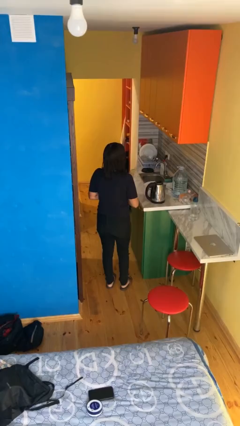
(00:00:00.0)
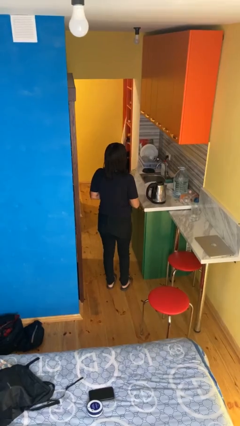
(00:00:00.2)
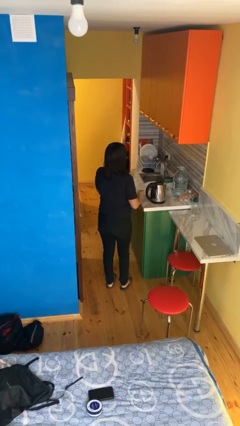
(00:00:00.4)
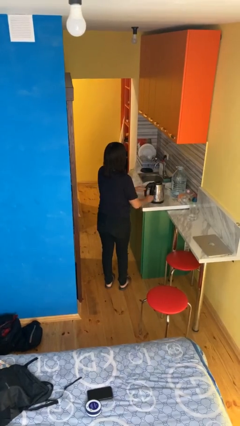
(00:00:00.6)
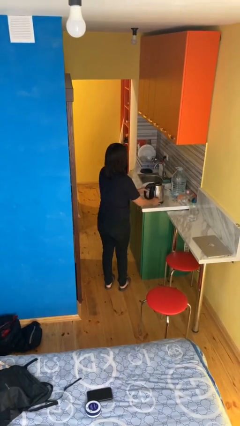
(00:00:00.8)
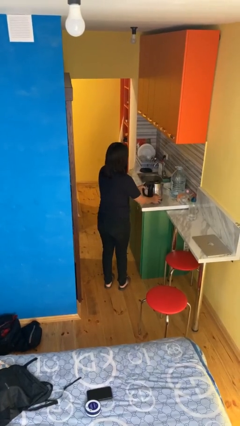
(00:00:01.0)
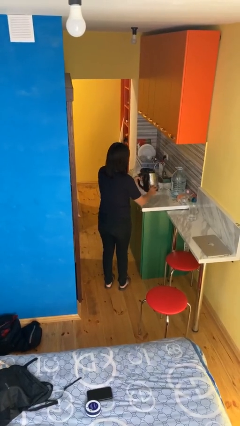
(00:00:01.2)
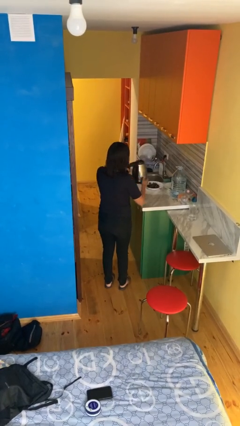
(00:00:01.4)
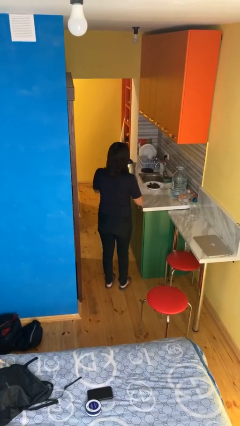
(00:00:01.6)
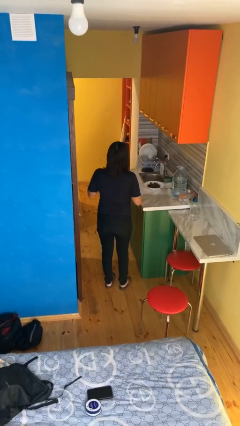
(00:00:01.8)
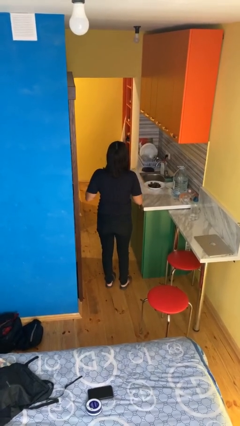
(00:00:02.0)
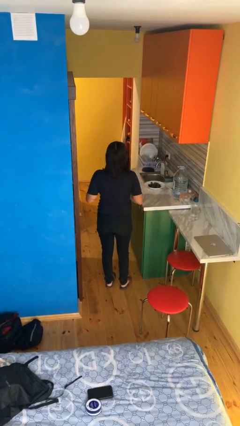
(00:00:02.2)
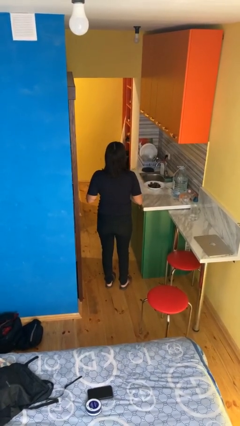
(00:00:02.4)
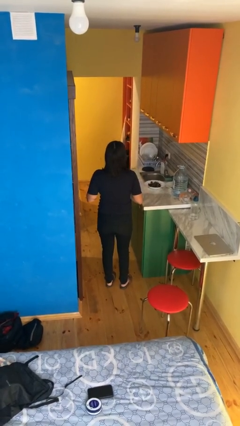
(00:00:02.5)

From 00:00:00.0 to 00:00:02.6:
person picks up object from countertop

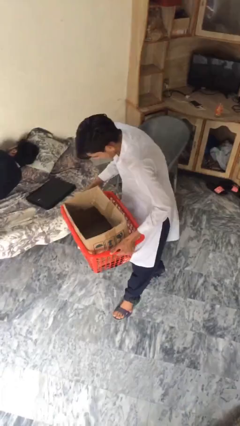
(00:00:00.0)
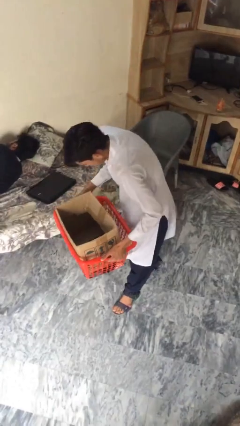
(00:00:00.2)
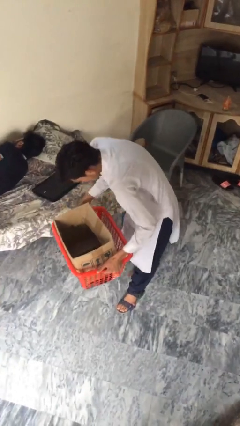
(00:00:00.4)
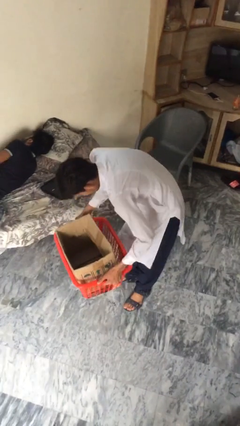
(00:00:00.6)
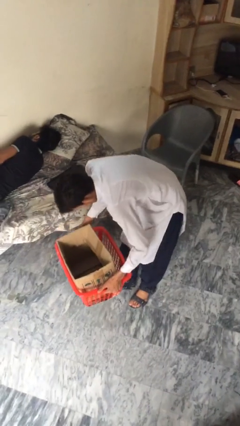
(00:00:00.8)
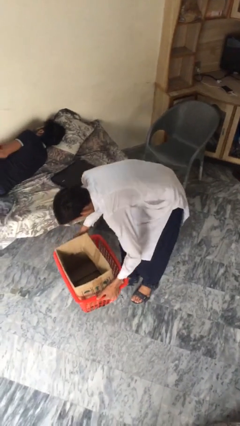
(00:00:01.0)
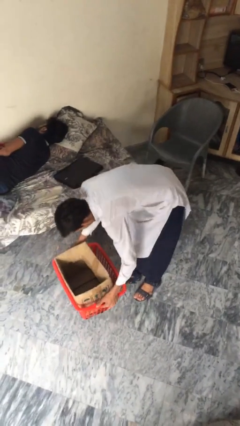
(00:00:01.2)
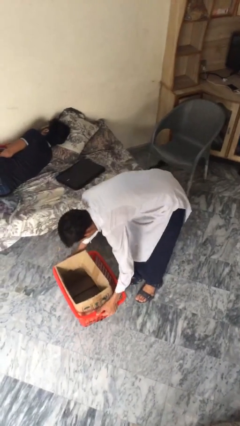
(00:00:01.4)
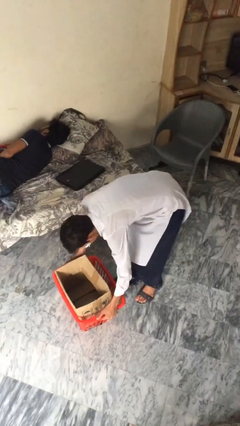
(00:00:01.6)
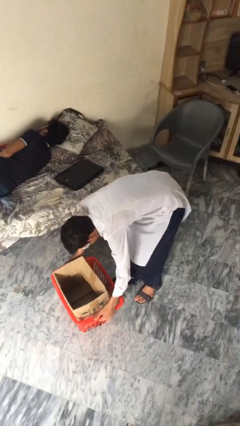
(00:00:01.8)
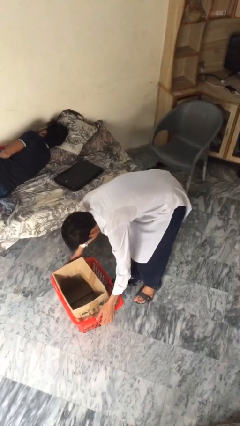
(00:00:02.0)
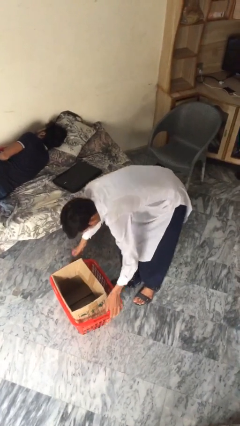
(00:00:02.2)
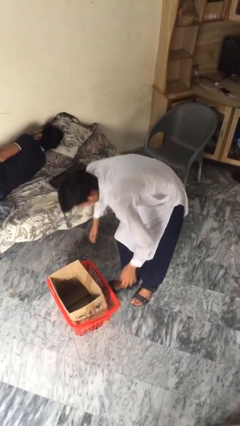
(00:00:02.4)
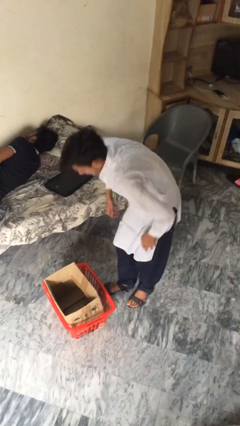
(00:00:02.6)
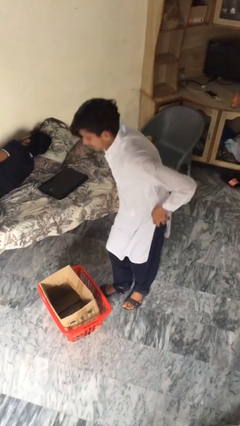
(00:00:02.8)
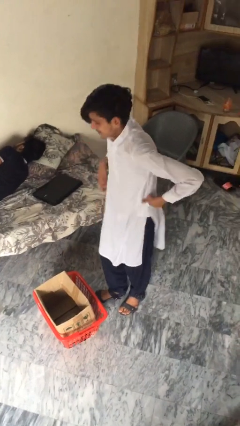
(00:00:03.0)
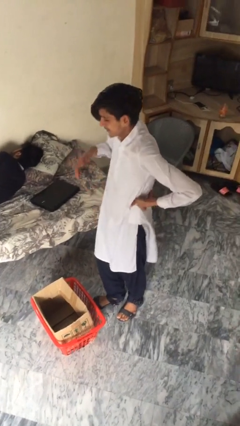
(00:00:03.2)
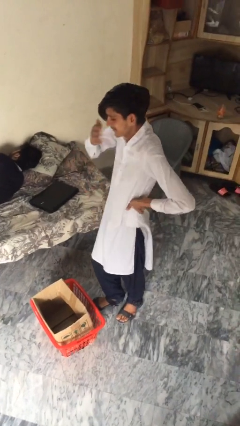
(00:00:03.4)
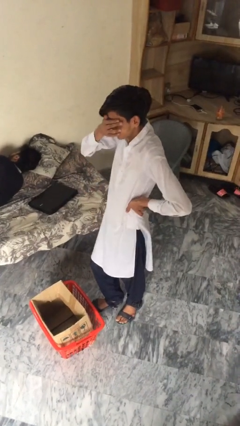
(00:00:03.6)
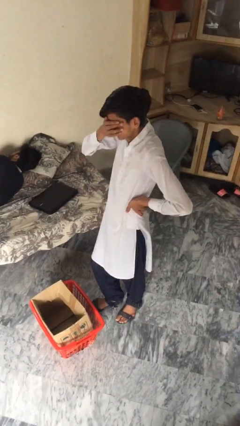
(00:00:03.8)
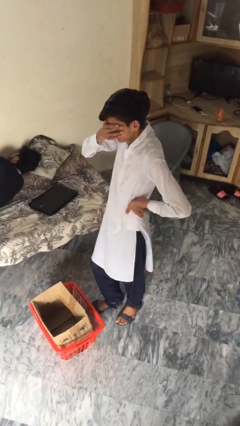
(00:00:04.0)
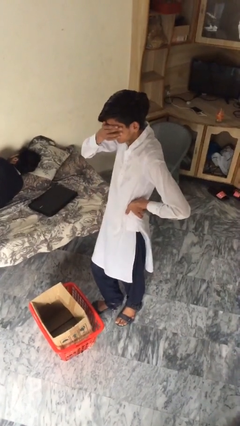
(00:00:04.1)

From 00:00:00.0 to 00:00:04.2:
person puts down object on floor

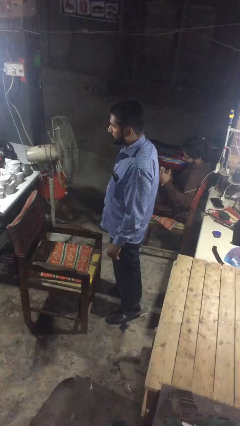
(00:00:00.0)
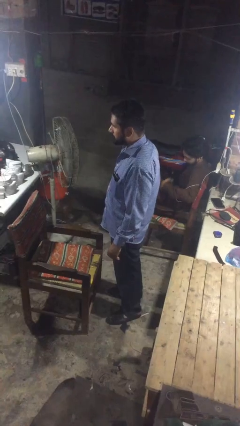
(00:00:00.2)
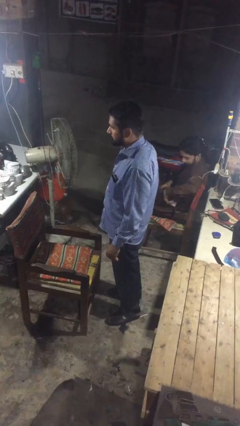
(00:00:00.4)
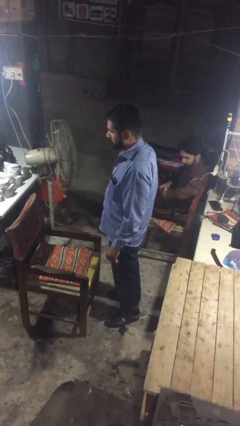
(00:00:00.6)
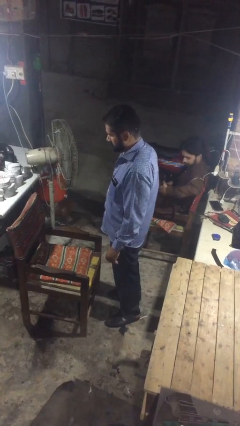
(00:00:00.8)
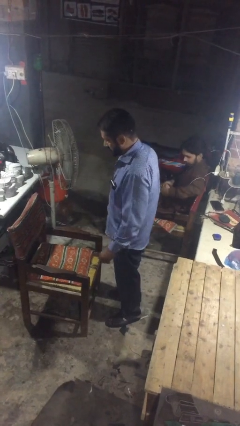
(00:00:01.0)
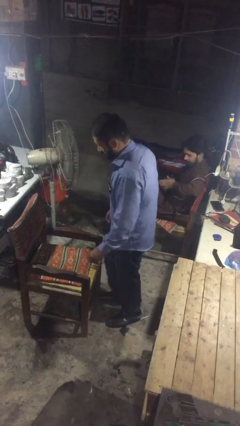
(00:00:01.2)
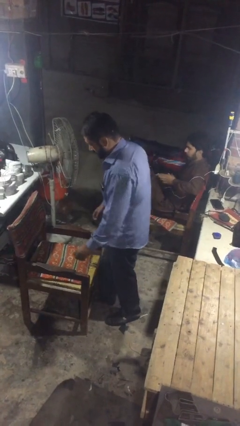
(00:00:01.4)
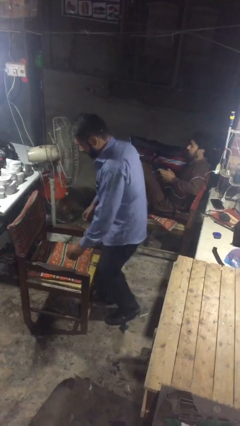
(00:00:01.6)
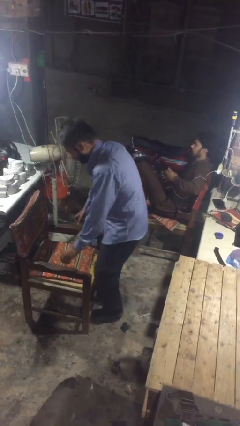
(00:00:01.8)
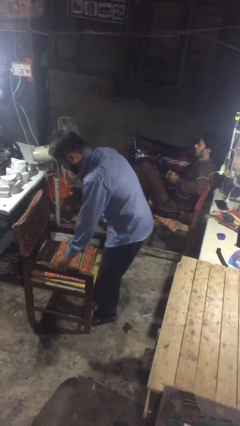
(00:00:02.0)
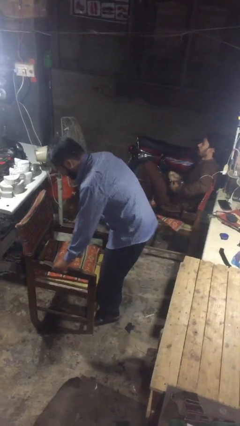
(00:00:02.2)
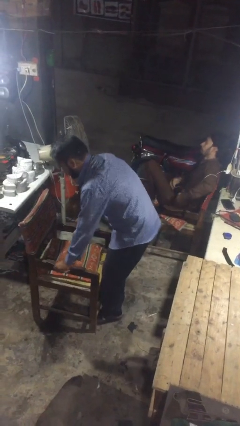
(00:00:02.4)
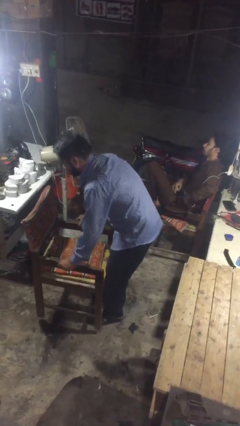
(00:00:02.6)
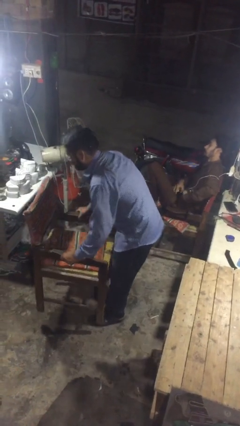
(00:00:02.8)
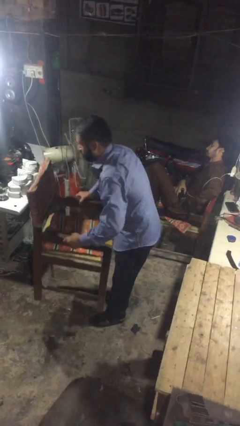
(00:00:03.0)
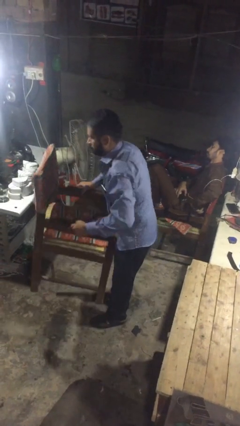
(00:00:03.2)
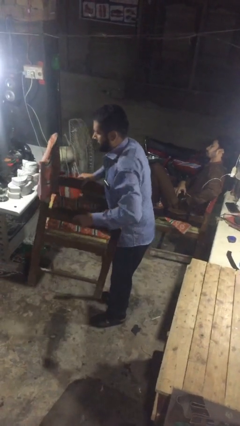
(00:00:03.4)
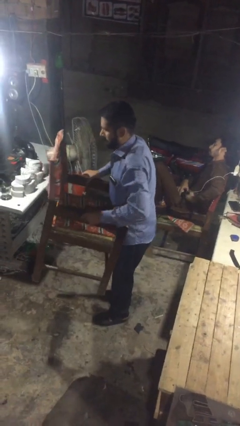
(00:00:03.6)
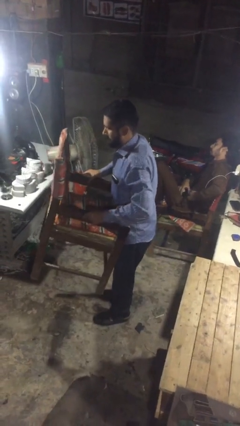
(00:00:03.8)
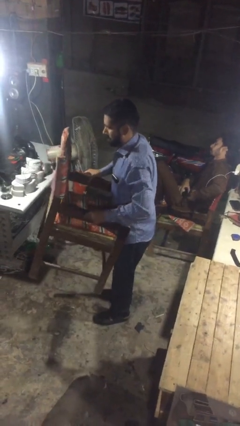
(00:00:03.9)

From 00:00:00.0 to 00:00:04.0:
person picks up object from floor

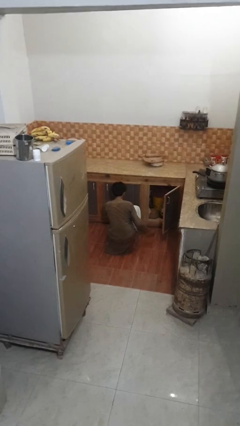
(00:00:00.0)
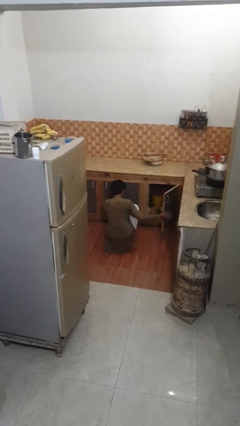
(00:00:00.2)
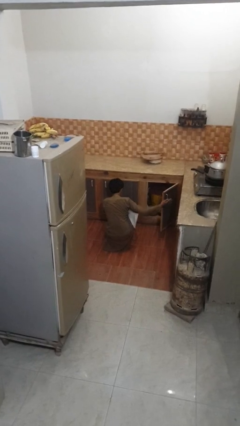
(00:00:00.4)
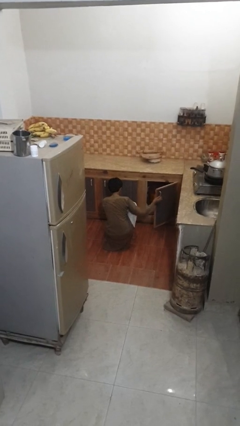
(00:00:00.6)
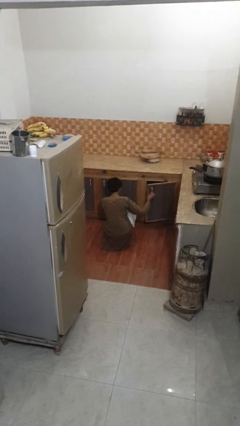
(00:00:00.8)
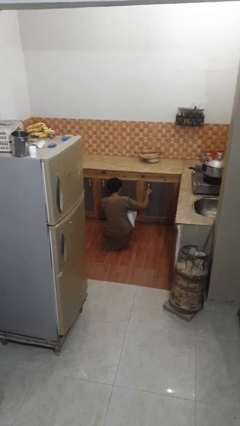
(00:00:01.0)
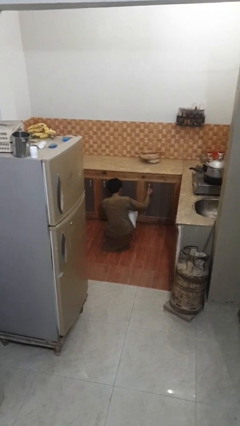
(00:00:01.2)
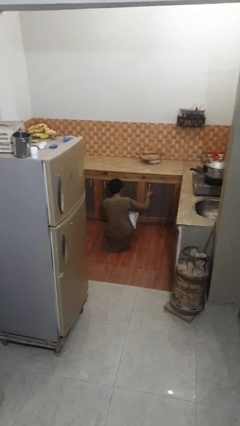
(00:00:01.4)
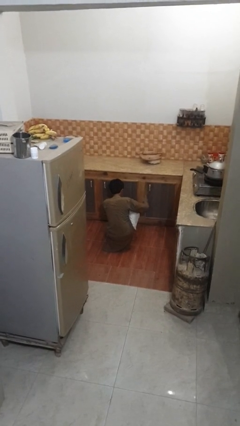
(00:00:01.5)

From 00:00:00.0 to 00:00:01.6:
person closes kitchen drawer

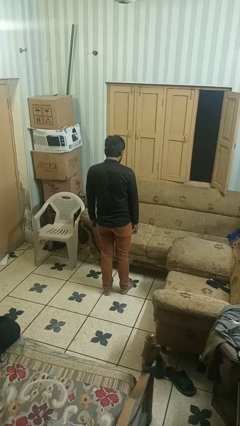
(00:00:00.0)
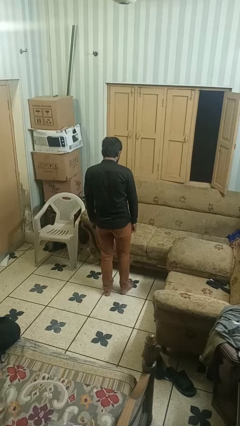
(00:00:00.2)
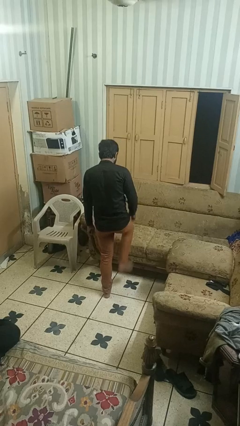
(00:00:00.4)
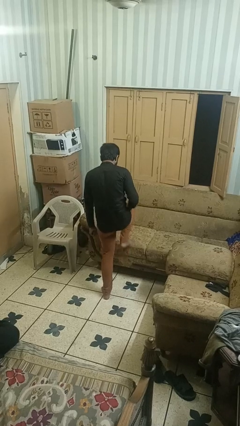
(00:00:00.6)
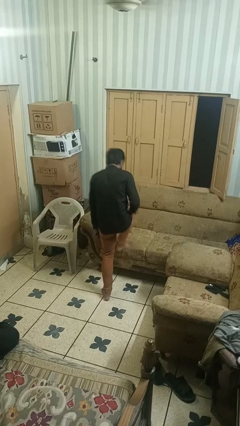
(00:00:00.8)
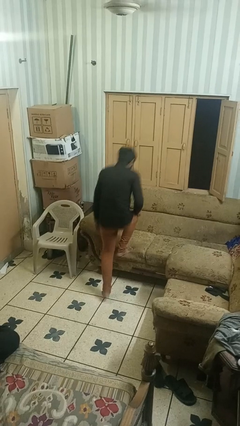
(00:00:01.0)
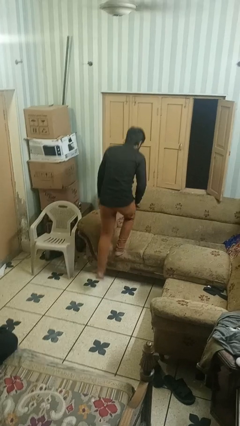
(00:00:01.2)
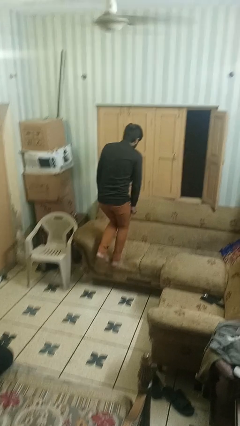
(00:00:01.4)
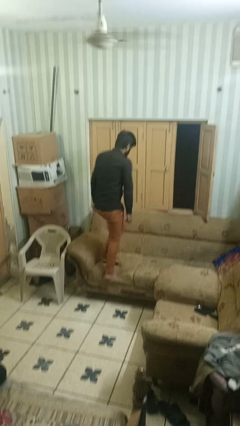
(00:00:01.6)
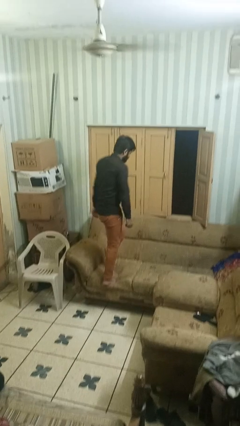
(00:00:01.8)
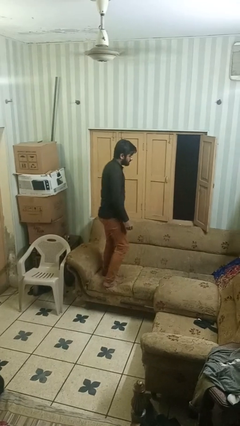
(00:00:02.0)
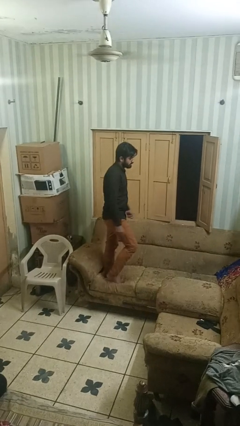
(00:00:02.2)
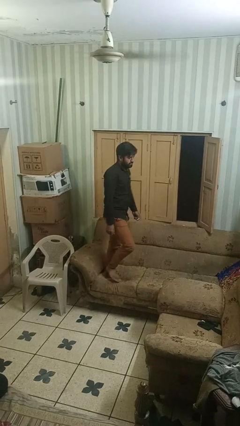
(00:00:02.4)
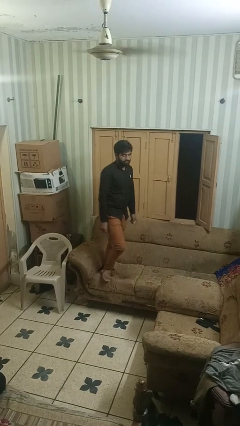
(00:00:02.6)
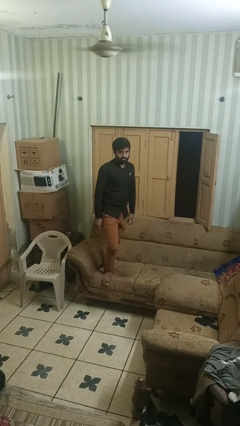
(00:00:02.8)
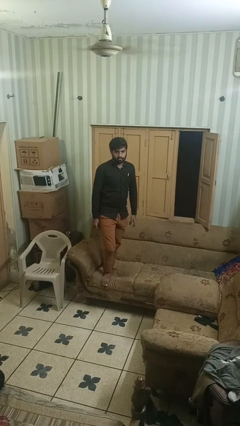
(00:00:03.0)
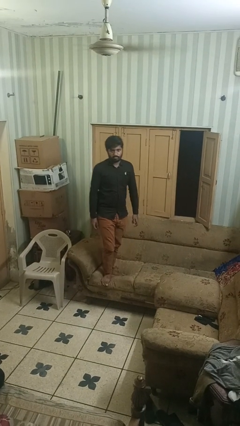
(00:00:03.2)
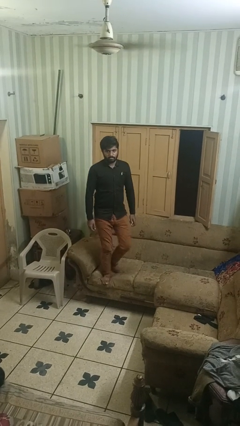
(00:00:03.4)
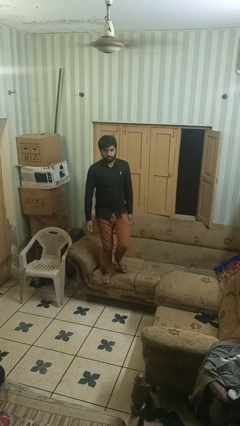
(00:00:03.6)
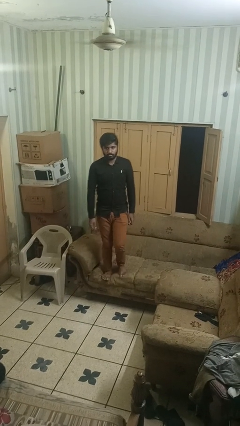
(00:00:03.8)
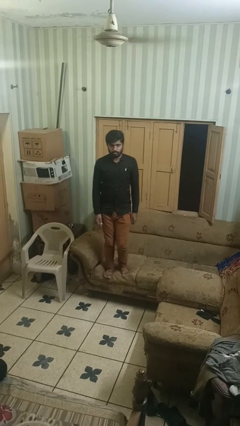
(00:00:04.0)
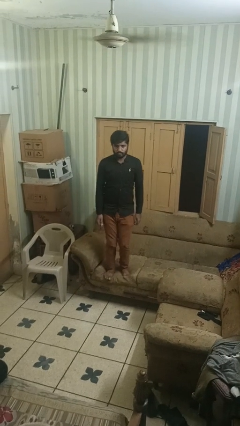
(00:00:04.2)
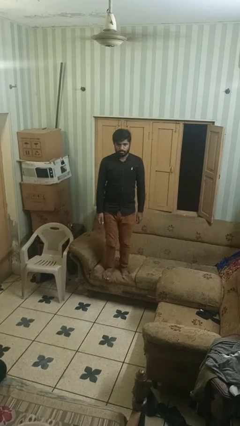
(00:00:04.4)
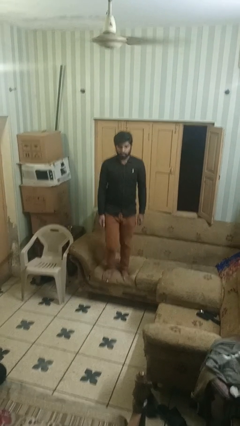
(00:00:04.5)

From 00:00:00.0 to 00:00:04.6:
person climbs on couch

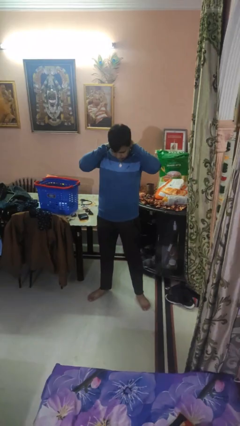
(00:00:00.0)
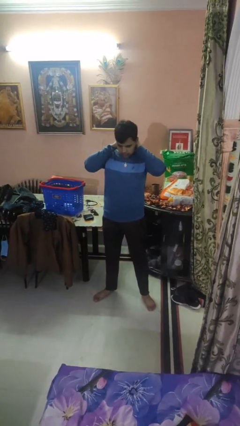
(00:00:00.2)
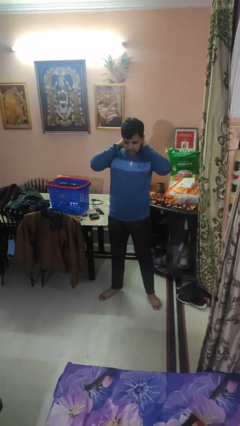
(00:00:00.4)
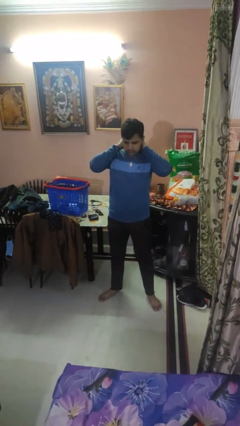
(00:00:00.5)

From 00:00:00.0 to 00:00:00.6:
person puts on necklace
